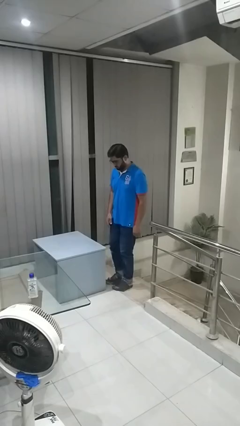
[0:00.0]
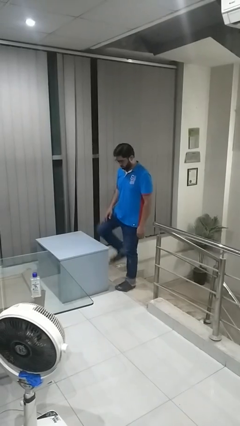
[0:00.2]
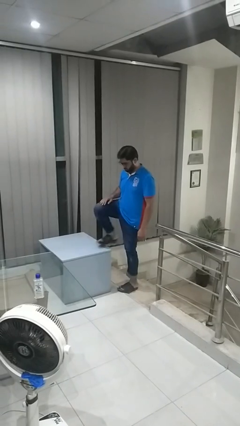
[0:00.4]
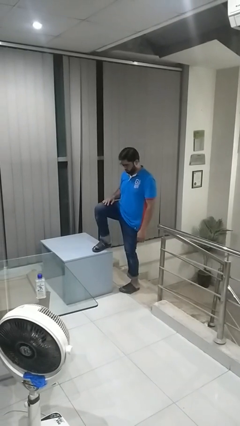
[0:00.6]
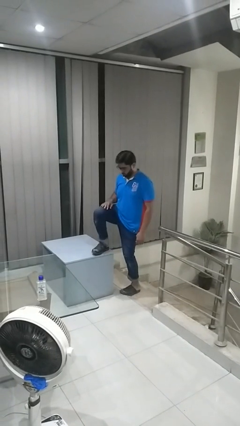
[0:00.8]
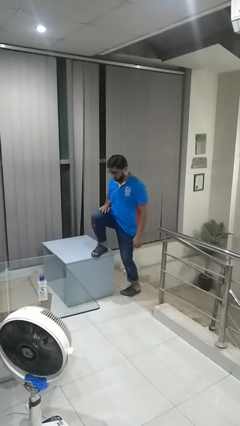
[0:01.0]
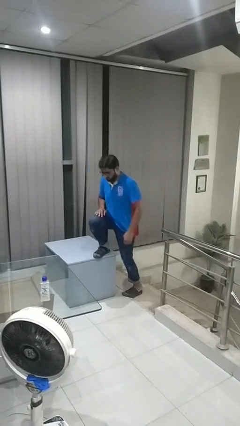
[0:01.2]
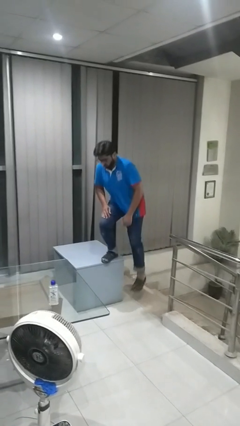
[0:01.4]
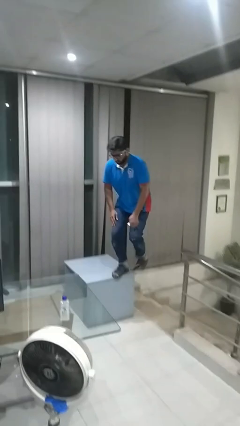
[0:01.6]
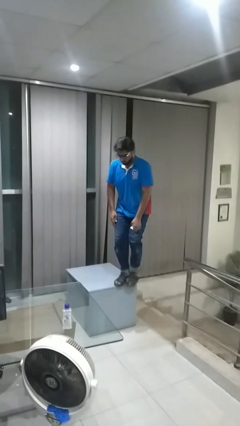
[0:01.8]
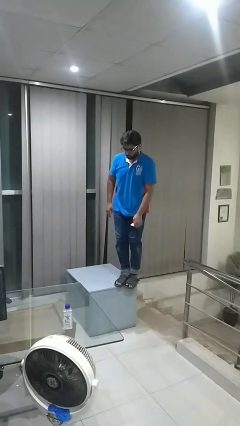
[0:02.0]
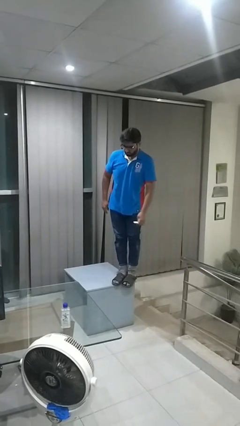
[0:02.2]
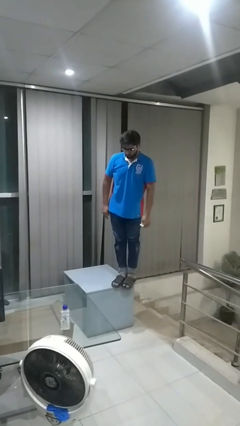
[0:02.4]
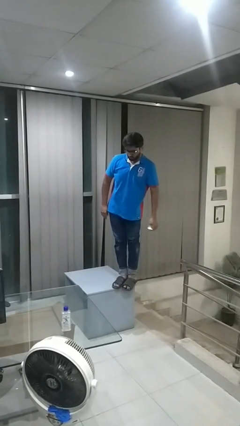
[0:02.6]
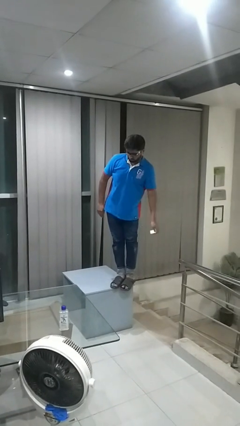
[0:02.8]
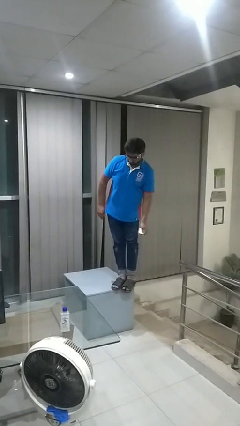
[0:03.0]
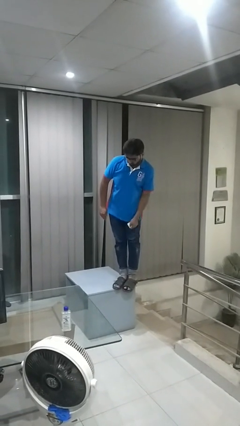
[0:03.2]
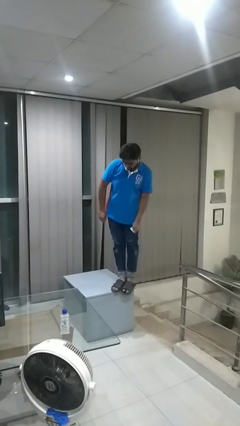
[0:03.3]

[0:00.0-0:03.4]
person climbs on table

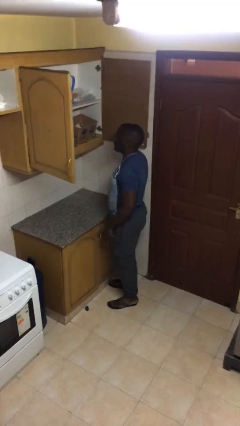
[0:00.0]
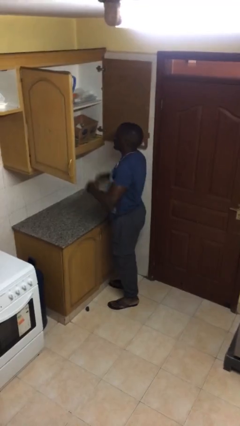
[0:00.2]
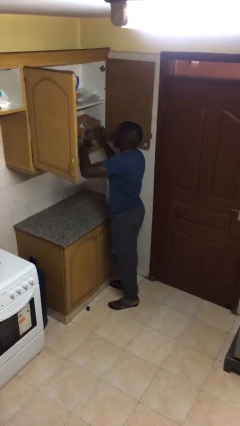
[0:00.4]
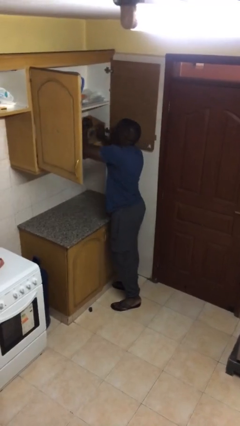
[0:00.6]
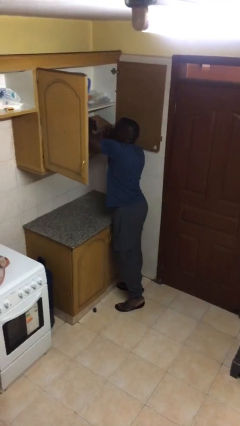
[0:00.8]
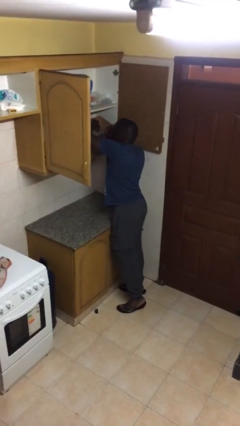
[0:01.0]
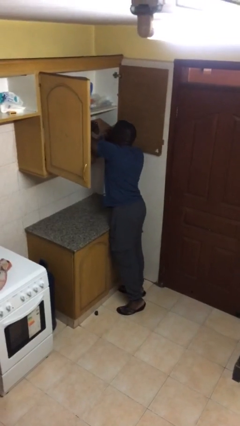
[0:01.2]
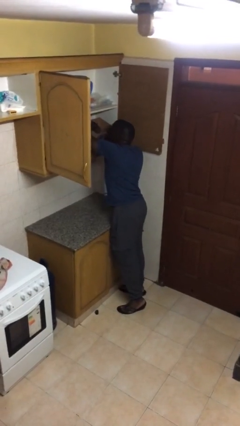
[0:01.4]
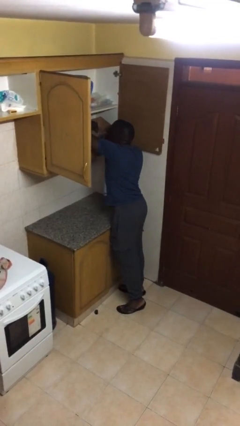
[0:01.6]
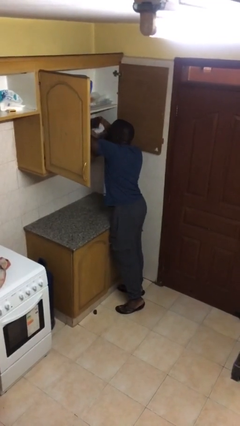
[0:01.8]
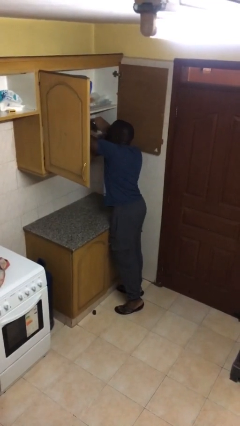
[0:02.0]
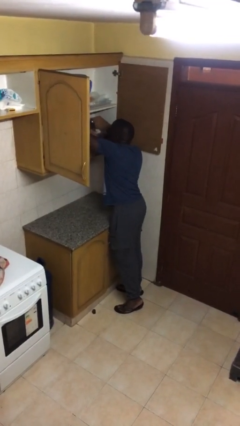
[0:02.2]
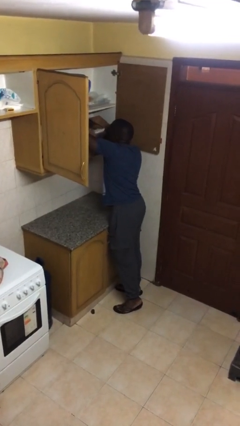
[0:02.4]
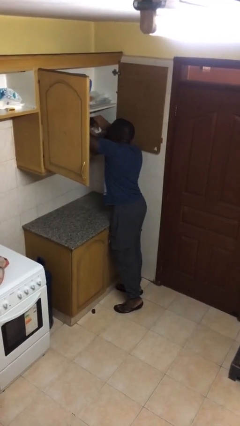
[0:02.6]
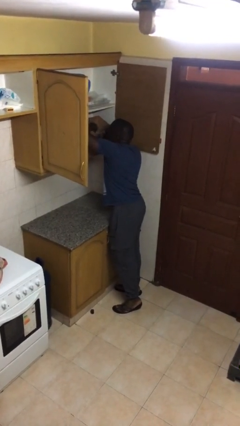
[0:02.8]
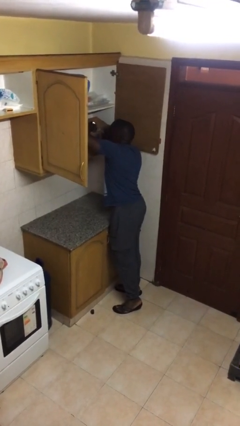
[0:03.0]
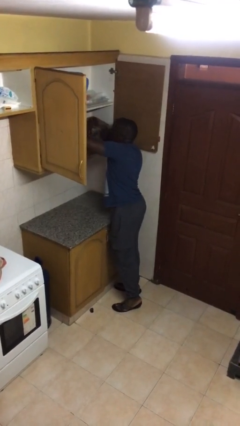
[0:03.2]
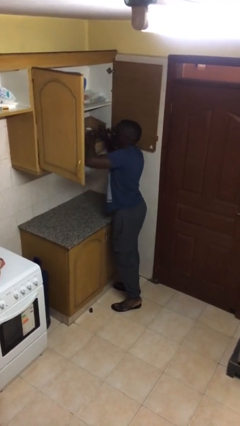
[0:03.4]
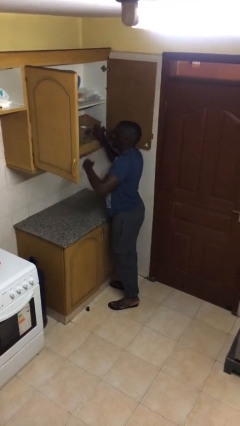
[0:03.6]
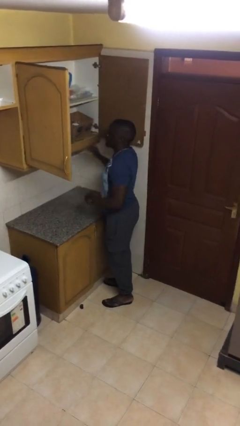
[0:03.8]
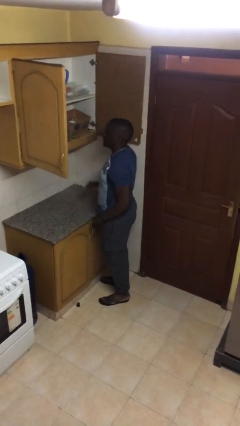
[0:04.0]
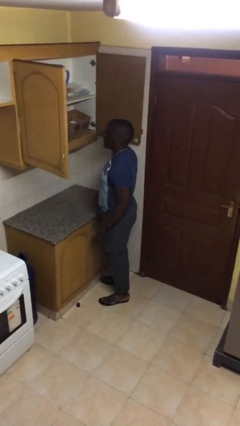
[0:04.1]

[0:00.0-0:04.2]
person searches in cabinet

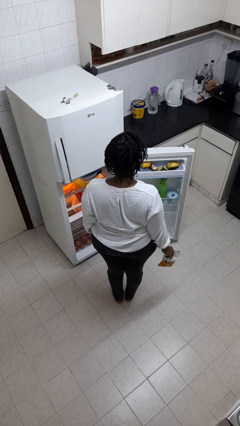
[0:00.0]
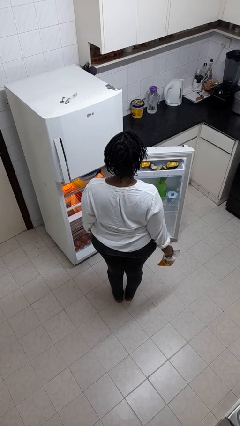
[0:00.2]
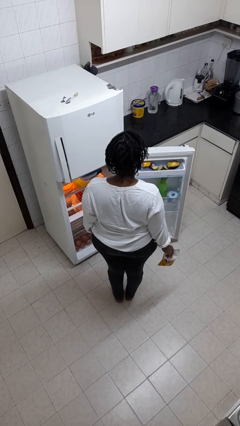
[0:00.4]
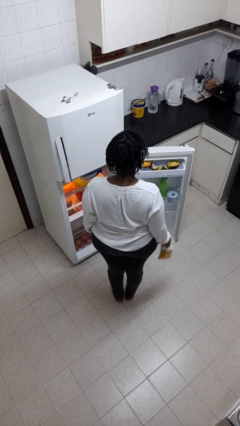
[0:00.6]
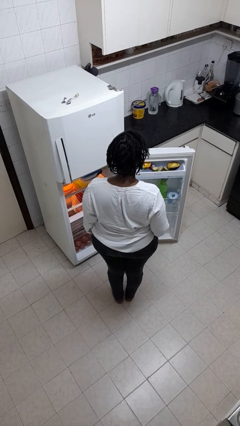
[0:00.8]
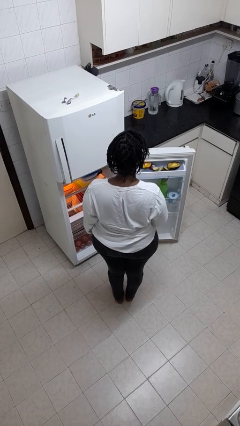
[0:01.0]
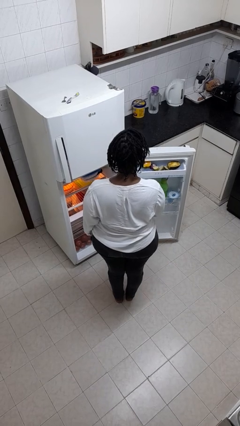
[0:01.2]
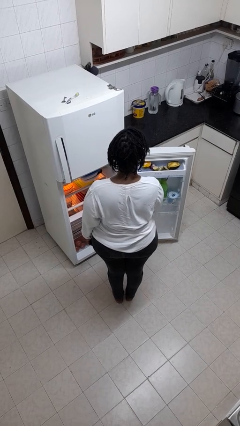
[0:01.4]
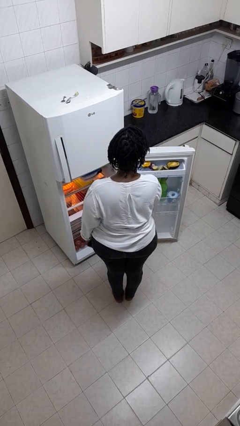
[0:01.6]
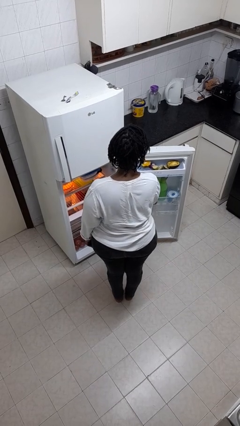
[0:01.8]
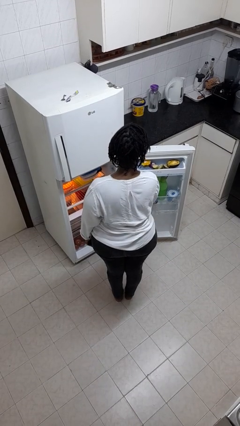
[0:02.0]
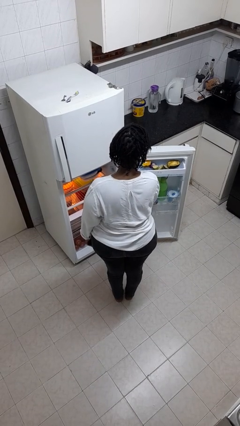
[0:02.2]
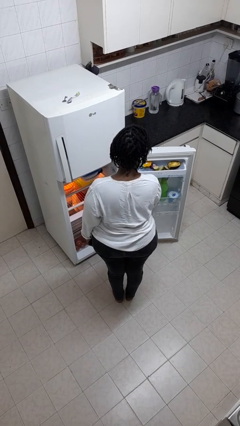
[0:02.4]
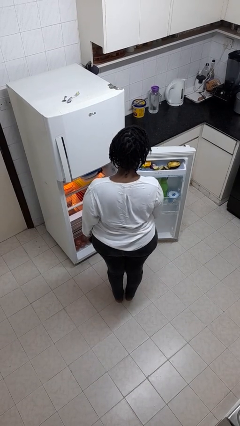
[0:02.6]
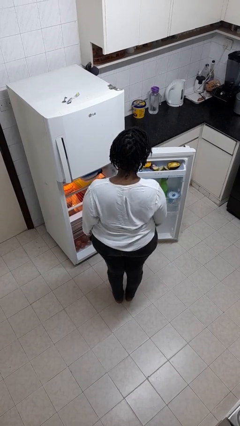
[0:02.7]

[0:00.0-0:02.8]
person puts object into refrigerator

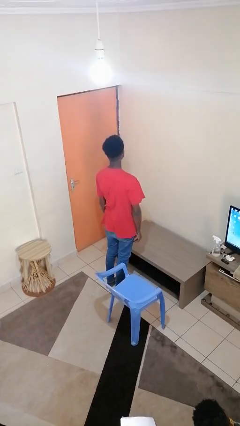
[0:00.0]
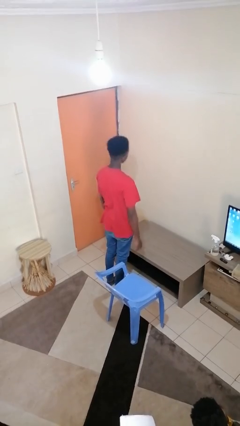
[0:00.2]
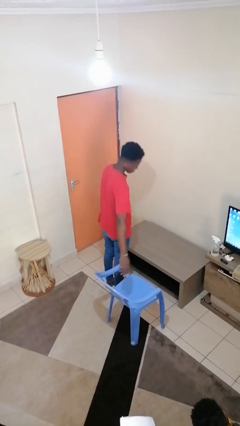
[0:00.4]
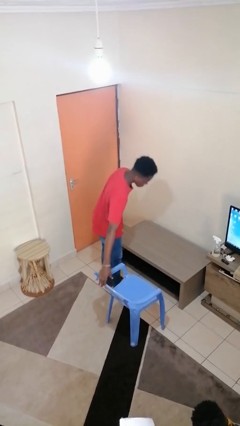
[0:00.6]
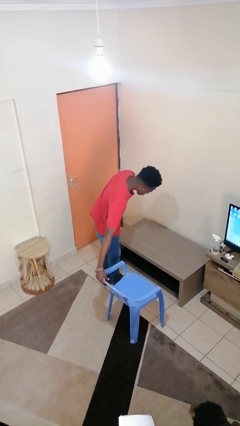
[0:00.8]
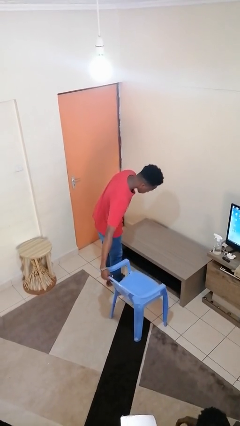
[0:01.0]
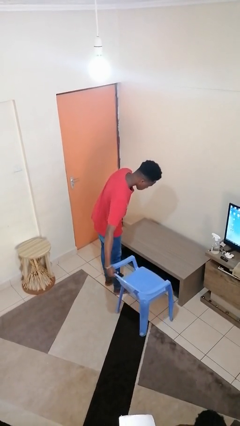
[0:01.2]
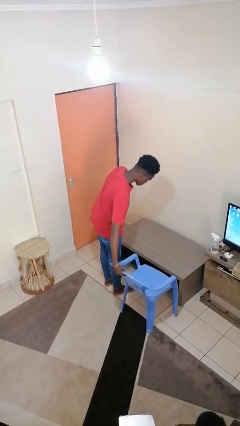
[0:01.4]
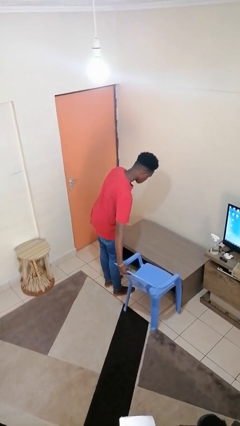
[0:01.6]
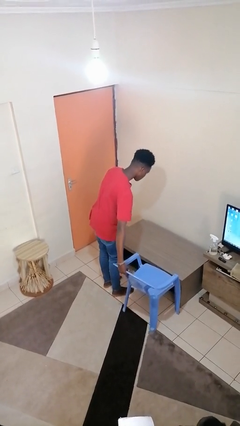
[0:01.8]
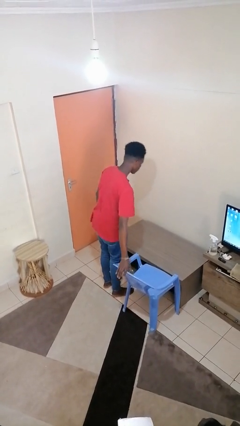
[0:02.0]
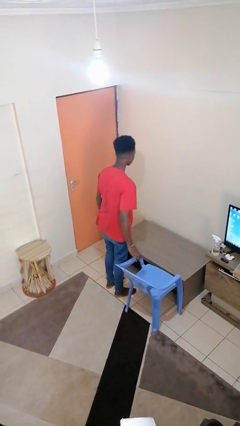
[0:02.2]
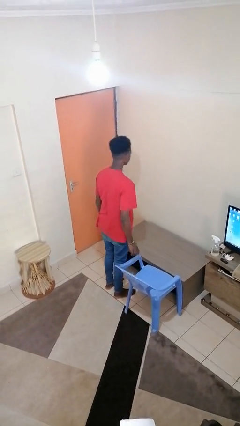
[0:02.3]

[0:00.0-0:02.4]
person pushes in chair

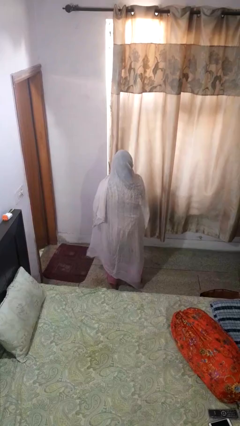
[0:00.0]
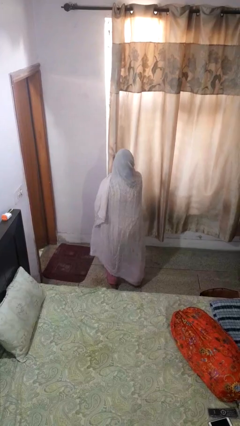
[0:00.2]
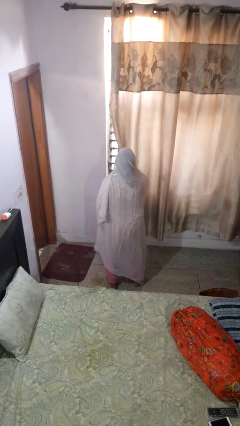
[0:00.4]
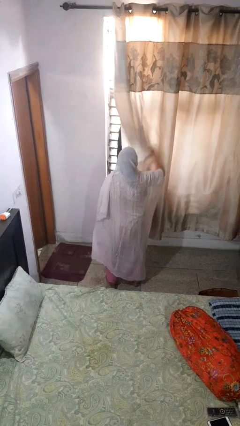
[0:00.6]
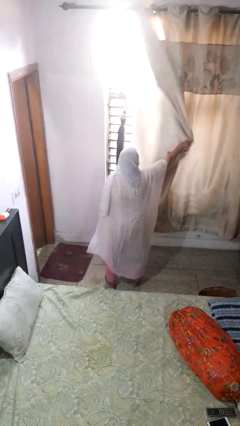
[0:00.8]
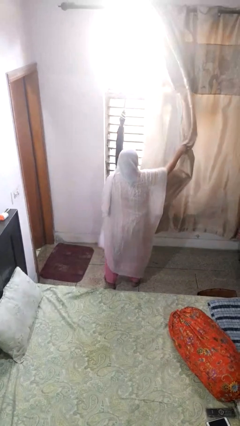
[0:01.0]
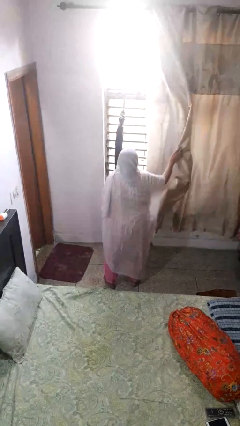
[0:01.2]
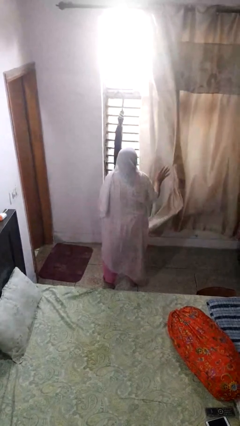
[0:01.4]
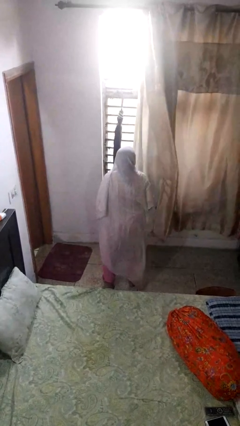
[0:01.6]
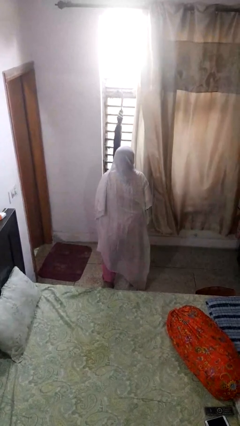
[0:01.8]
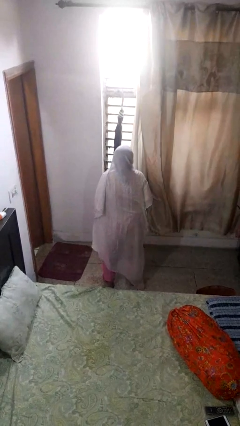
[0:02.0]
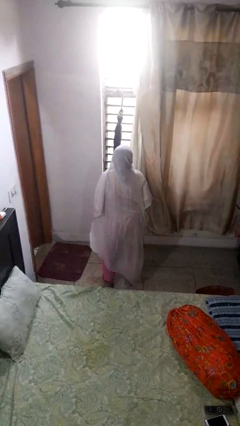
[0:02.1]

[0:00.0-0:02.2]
person opens curtains

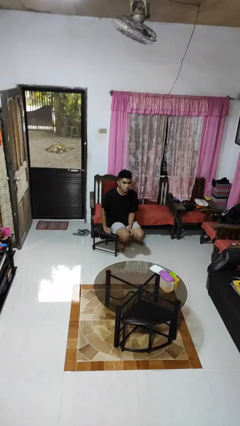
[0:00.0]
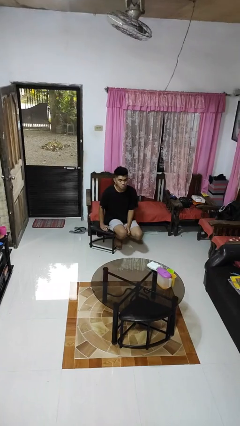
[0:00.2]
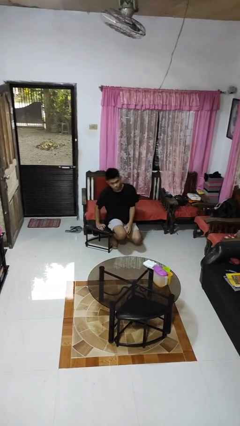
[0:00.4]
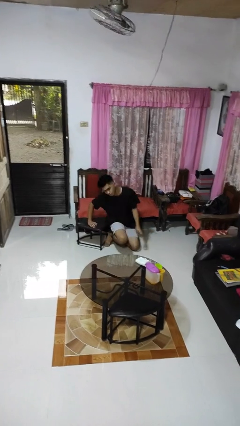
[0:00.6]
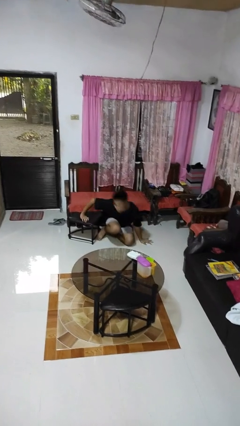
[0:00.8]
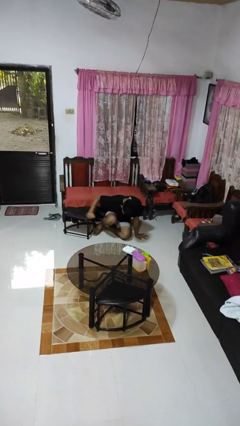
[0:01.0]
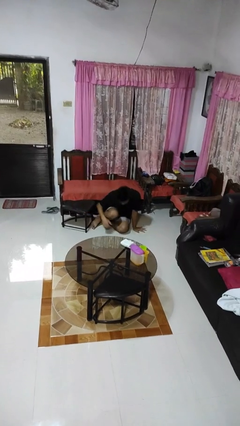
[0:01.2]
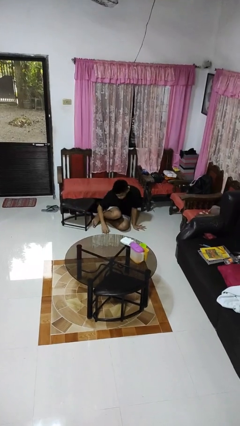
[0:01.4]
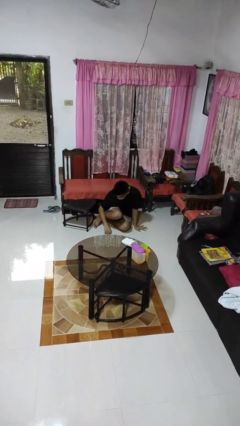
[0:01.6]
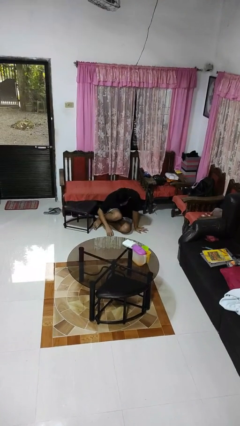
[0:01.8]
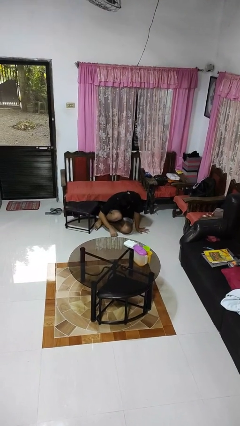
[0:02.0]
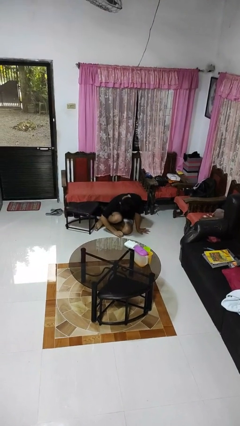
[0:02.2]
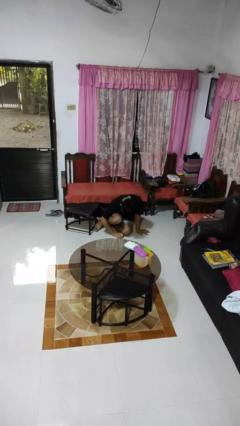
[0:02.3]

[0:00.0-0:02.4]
person falls from chair
